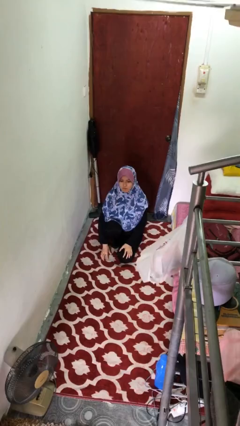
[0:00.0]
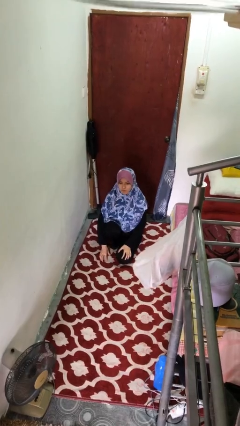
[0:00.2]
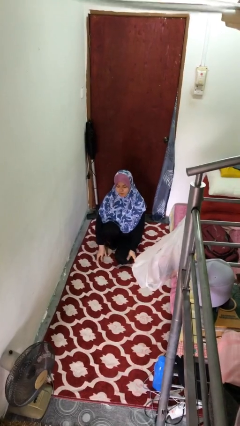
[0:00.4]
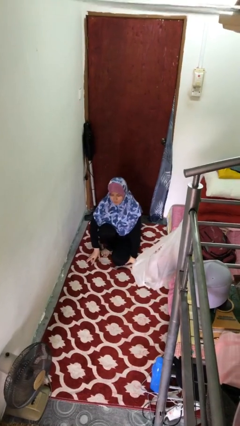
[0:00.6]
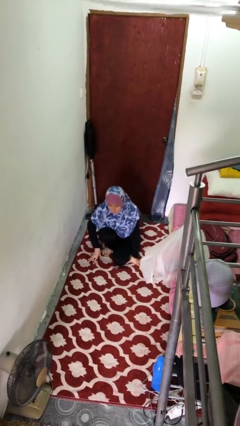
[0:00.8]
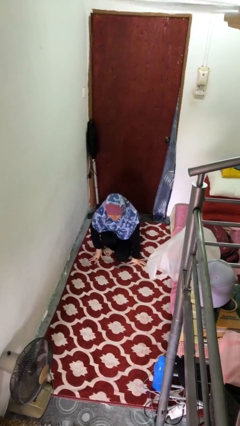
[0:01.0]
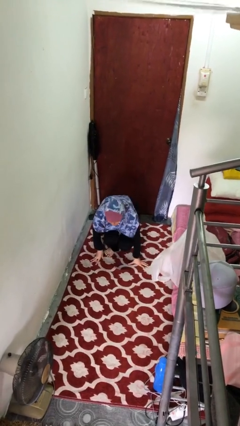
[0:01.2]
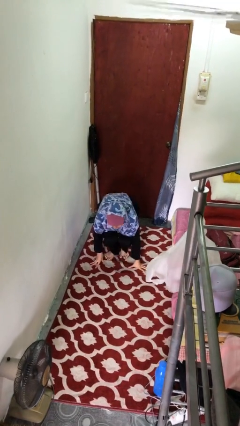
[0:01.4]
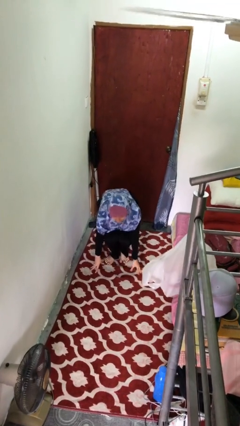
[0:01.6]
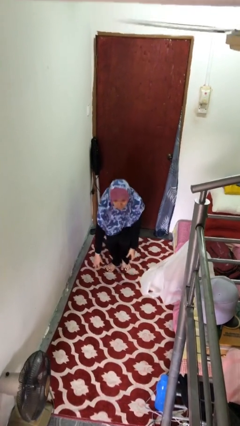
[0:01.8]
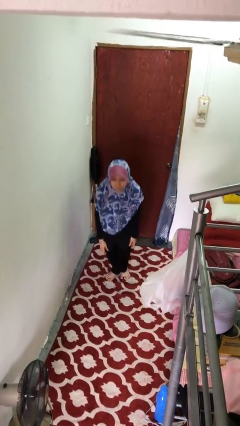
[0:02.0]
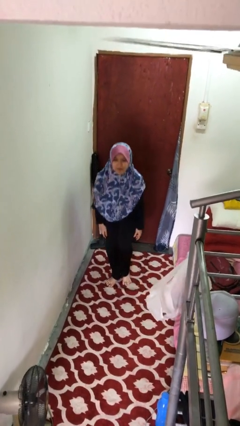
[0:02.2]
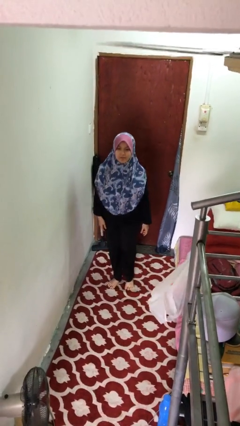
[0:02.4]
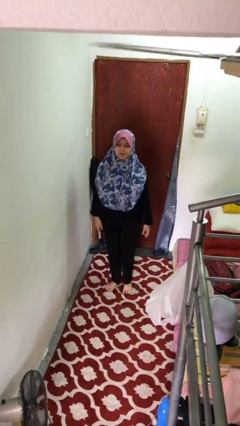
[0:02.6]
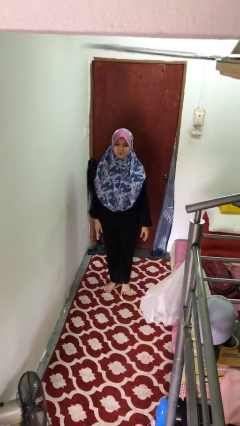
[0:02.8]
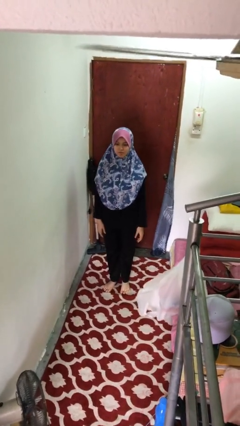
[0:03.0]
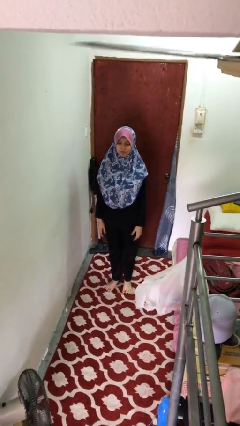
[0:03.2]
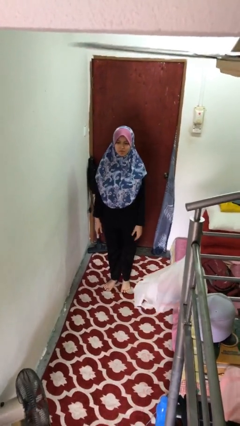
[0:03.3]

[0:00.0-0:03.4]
person stands up from floor

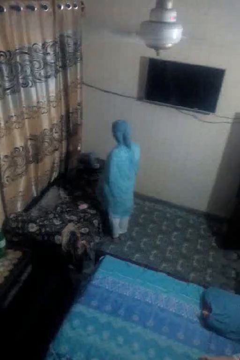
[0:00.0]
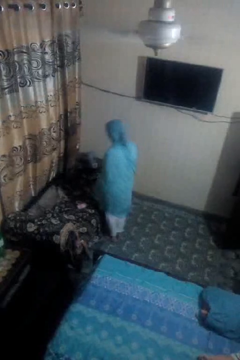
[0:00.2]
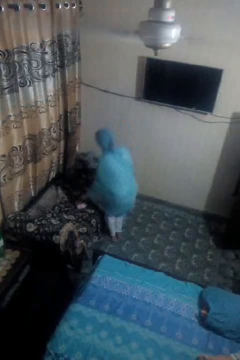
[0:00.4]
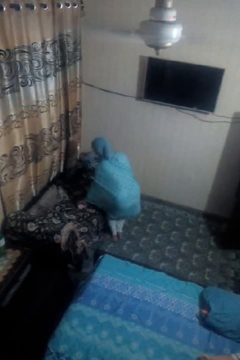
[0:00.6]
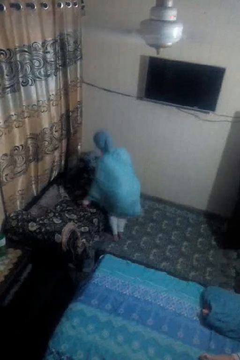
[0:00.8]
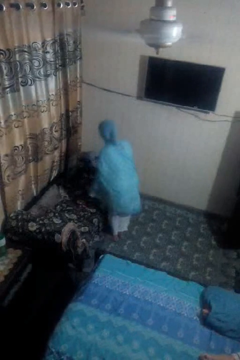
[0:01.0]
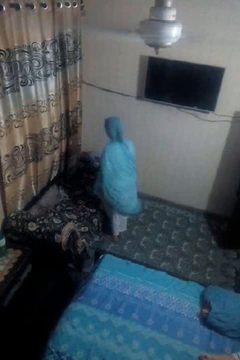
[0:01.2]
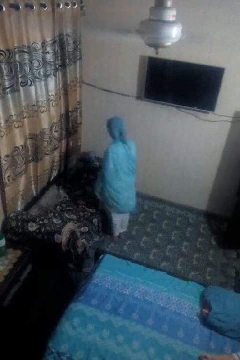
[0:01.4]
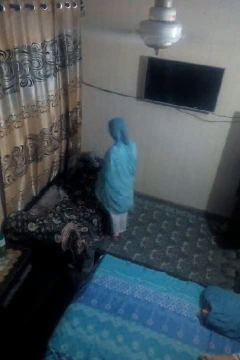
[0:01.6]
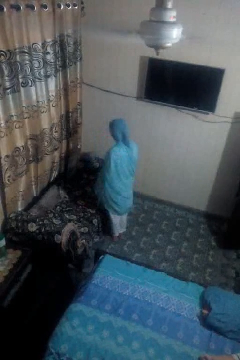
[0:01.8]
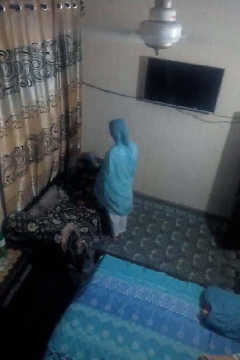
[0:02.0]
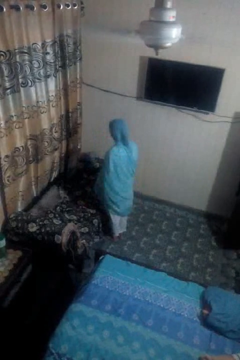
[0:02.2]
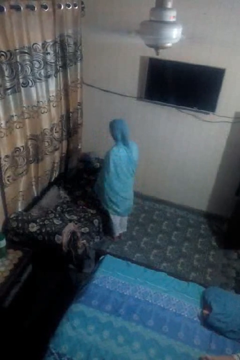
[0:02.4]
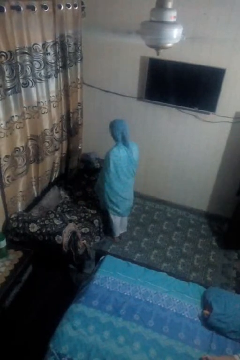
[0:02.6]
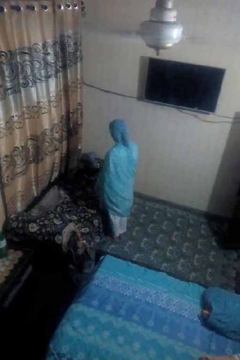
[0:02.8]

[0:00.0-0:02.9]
person picks up object from couch

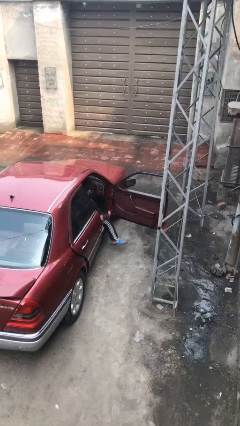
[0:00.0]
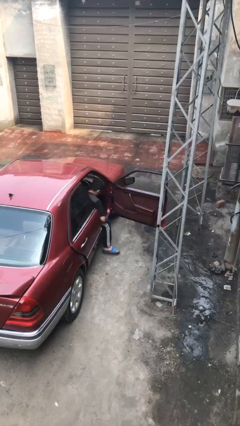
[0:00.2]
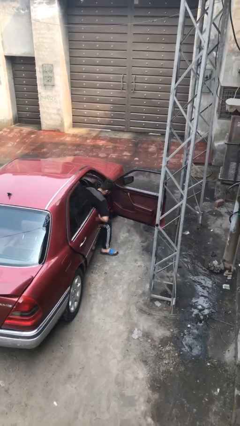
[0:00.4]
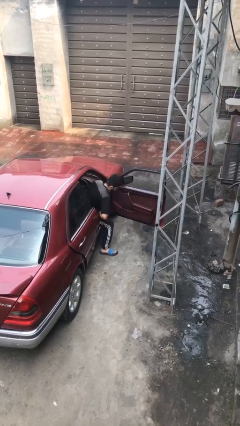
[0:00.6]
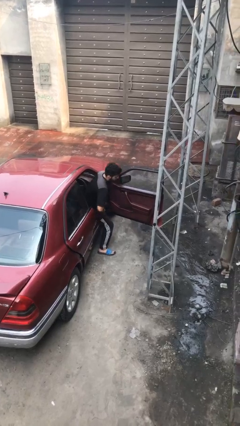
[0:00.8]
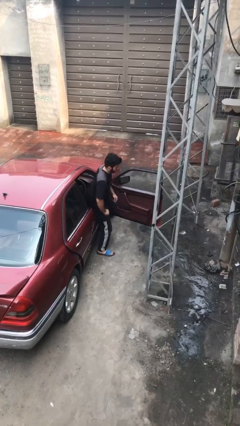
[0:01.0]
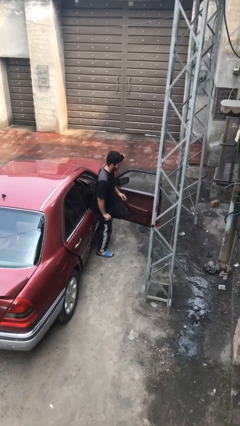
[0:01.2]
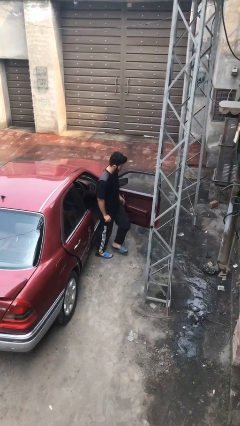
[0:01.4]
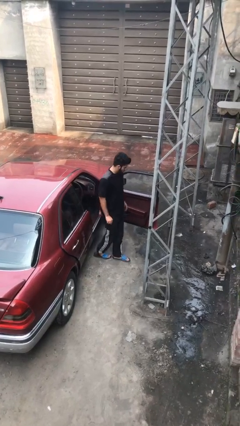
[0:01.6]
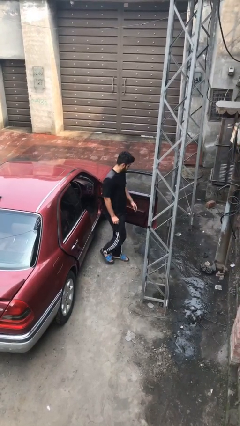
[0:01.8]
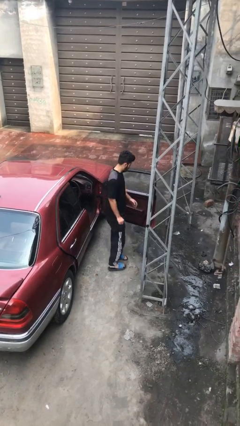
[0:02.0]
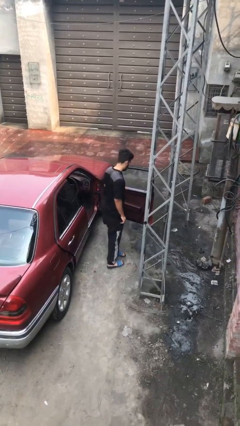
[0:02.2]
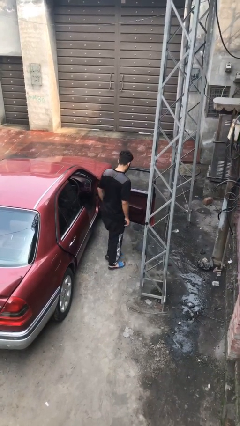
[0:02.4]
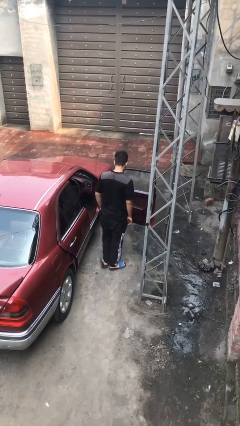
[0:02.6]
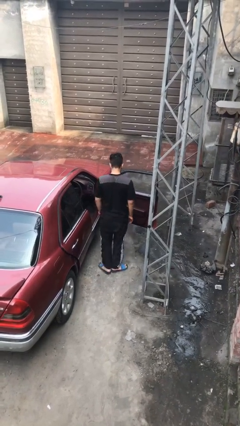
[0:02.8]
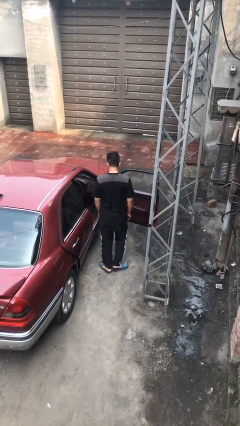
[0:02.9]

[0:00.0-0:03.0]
person exits car

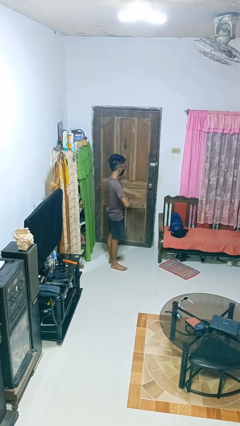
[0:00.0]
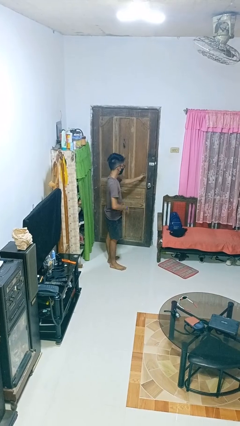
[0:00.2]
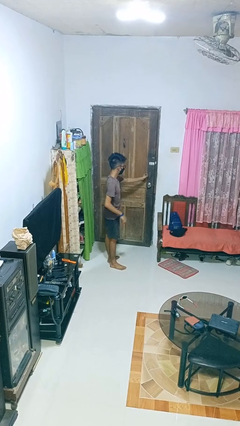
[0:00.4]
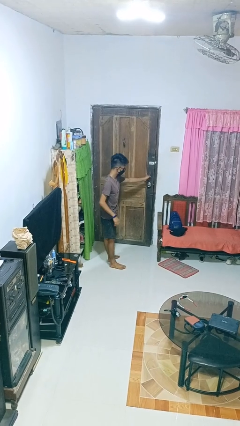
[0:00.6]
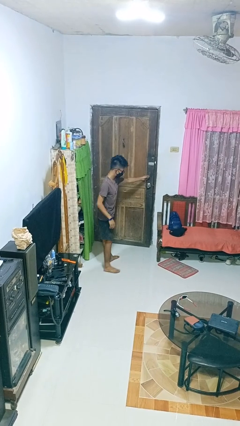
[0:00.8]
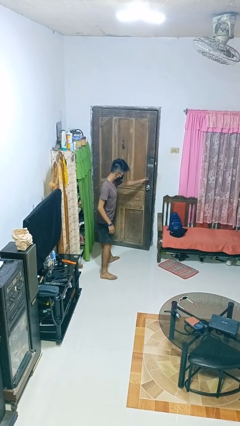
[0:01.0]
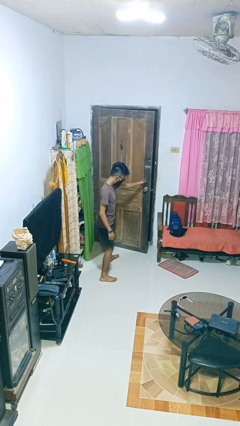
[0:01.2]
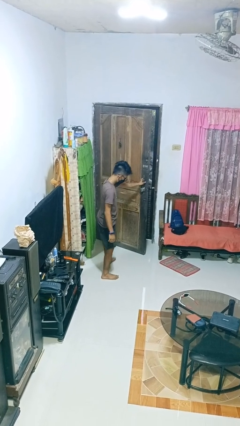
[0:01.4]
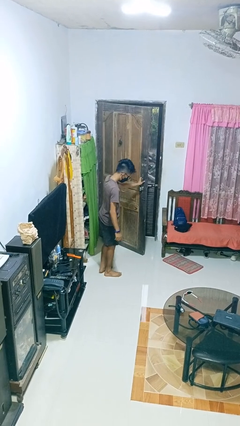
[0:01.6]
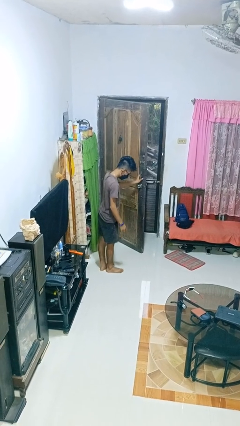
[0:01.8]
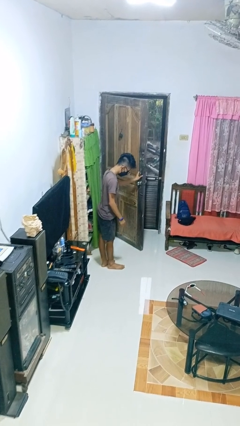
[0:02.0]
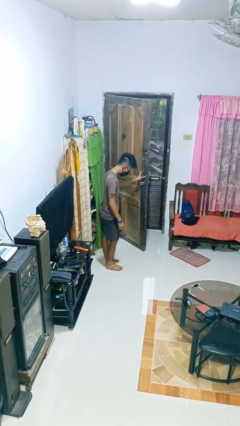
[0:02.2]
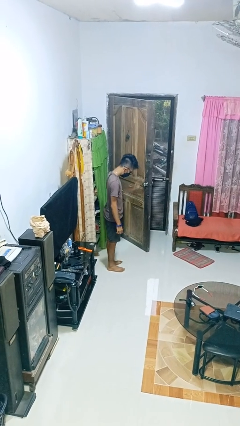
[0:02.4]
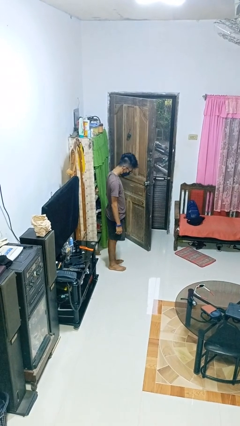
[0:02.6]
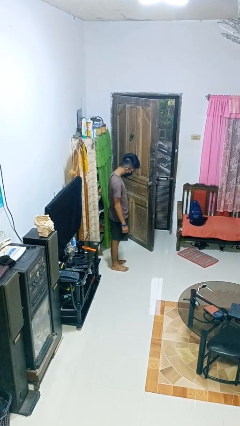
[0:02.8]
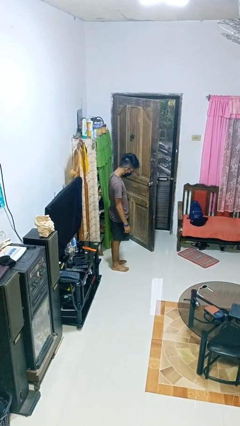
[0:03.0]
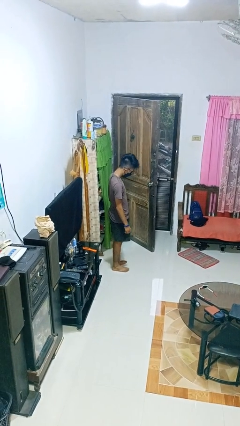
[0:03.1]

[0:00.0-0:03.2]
person opens facility door

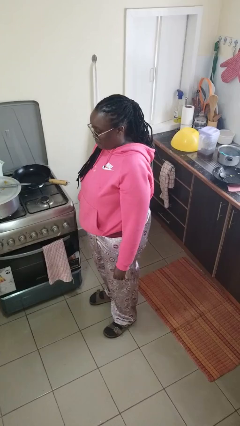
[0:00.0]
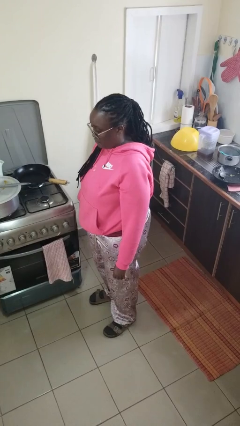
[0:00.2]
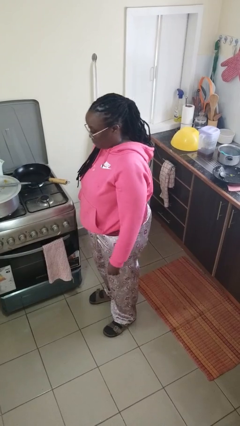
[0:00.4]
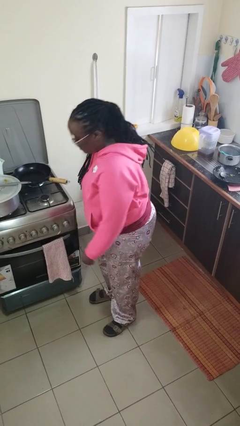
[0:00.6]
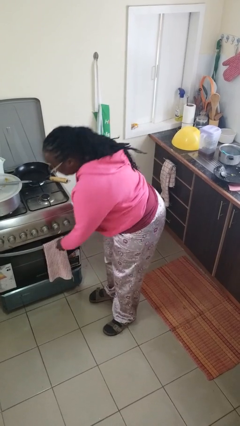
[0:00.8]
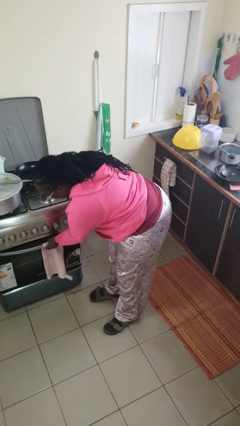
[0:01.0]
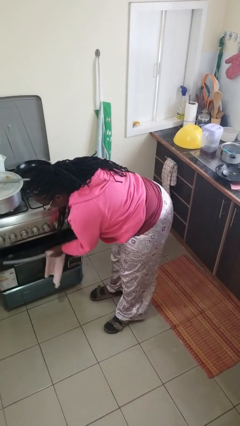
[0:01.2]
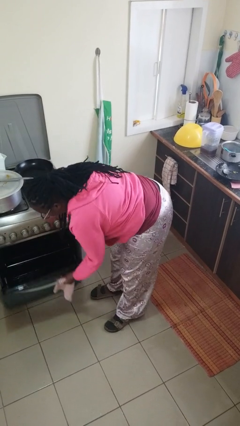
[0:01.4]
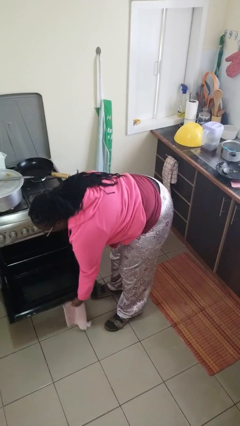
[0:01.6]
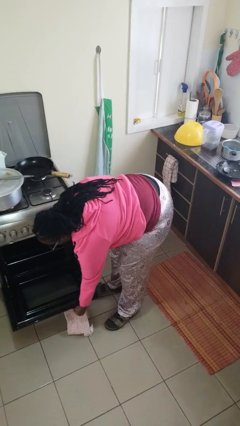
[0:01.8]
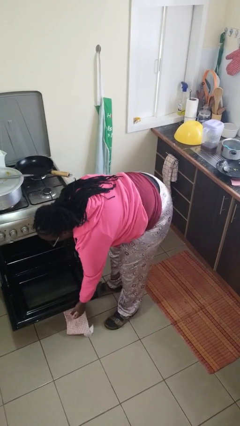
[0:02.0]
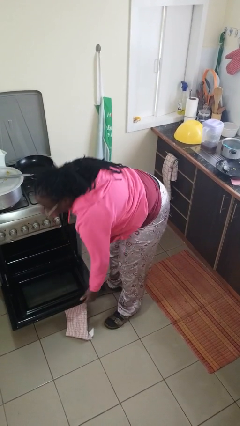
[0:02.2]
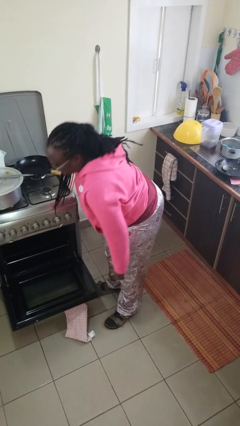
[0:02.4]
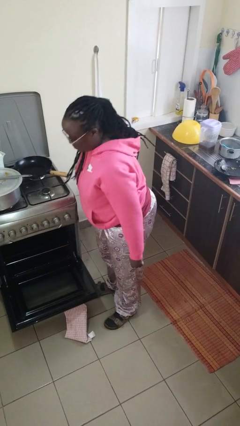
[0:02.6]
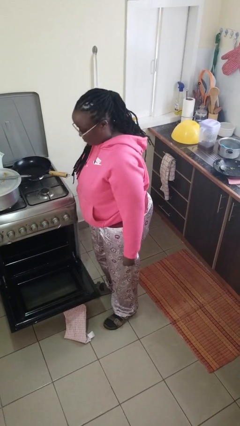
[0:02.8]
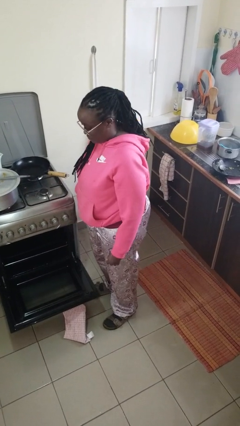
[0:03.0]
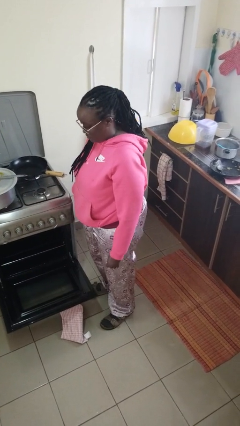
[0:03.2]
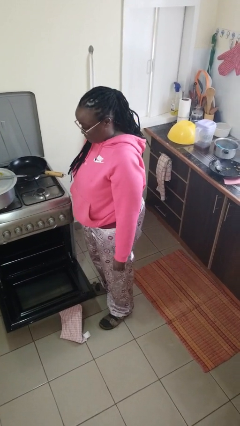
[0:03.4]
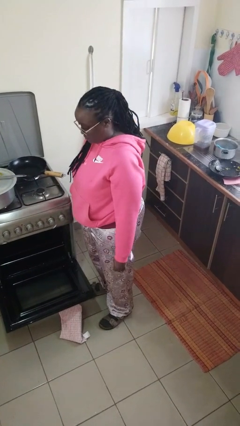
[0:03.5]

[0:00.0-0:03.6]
person opens oven door

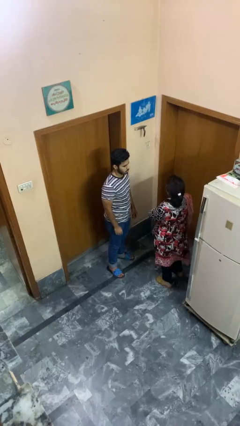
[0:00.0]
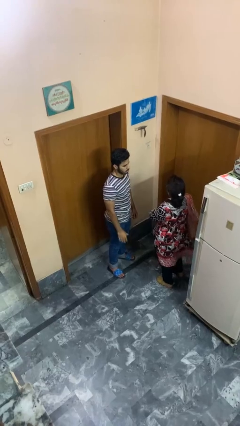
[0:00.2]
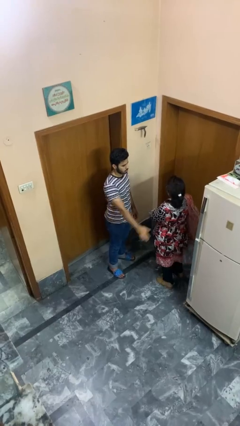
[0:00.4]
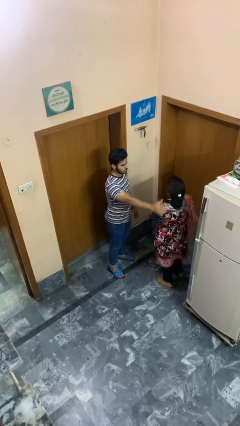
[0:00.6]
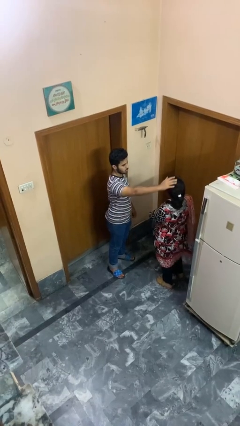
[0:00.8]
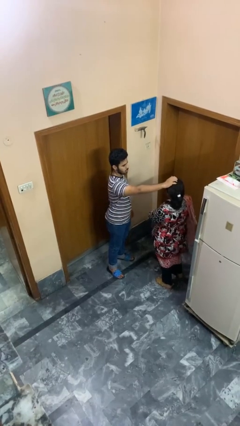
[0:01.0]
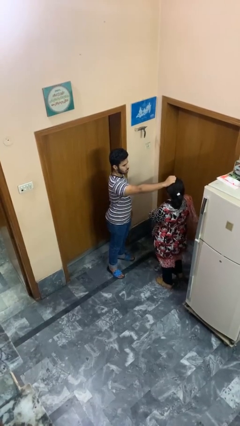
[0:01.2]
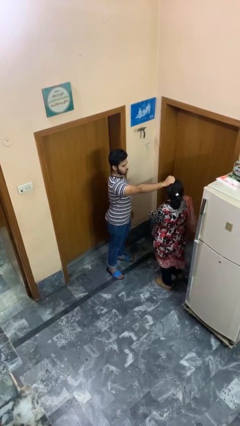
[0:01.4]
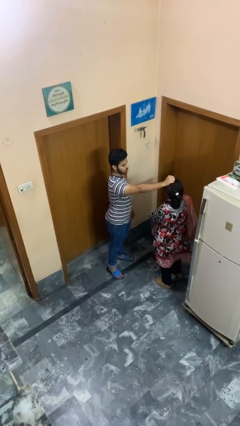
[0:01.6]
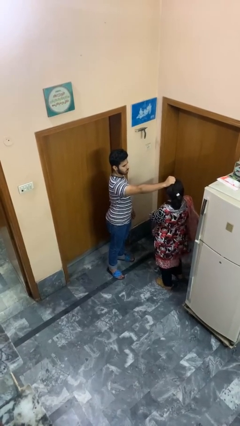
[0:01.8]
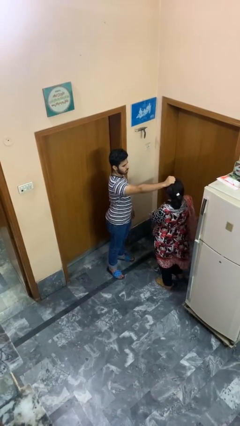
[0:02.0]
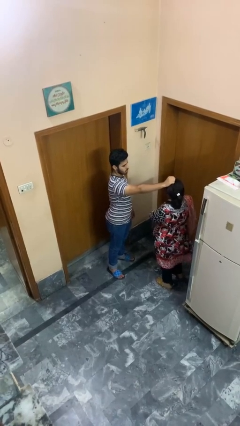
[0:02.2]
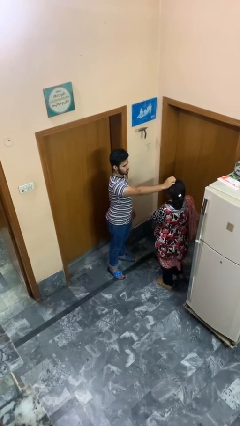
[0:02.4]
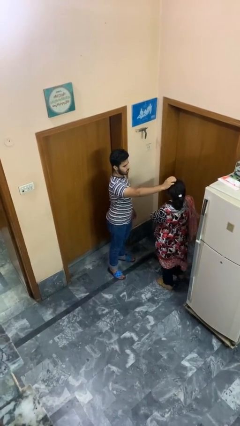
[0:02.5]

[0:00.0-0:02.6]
person grabs person by hair
